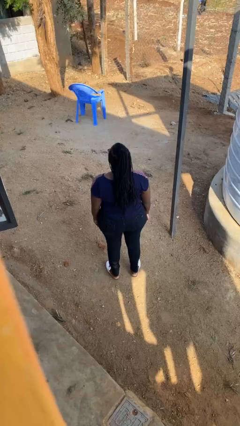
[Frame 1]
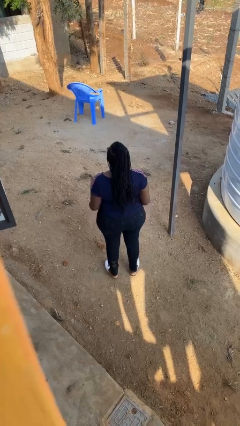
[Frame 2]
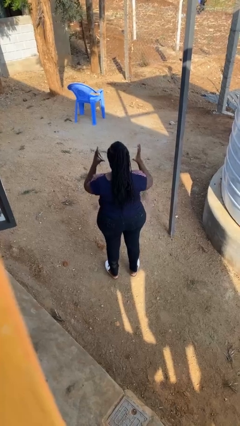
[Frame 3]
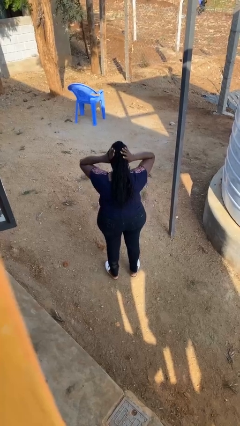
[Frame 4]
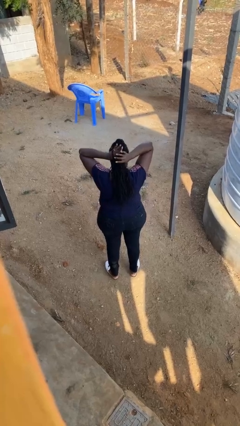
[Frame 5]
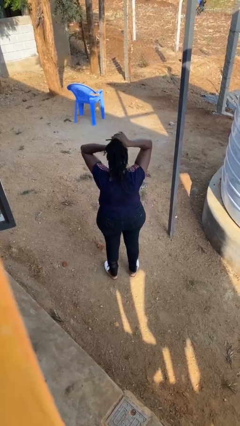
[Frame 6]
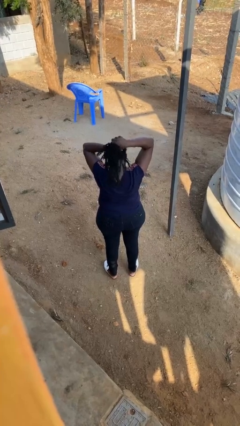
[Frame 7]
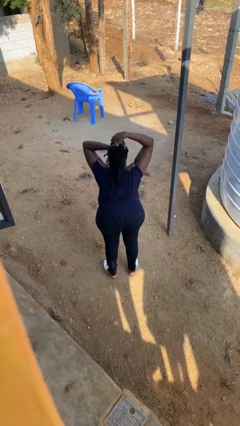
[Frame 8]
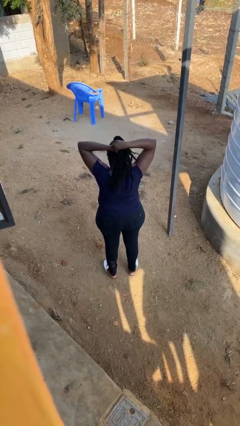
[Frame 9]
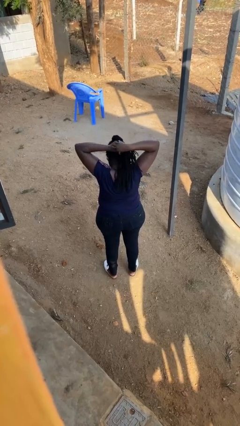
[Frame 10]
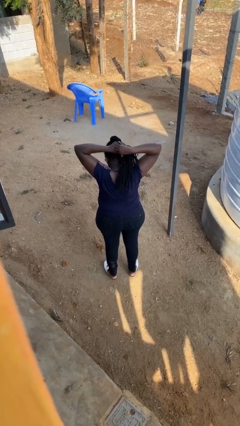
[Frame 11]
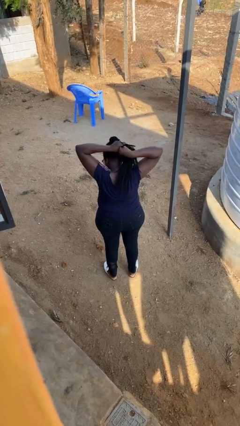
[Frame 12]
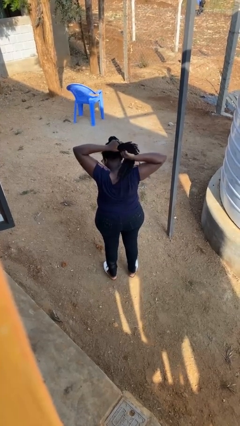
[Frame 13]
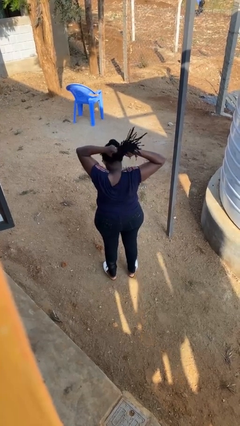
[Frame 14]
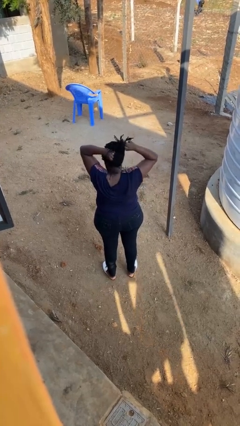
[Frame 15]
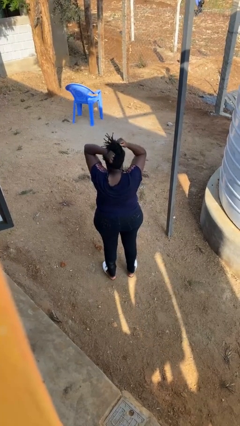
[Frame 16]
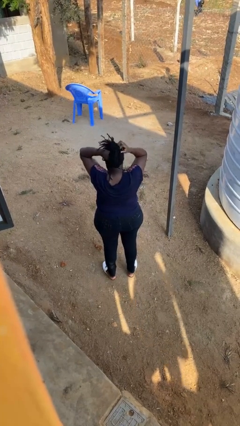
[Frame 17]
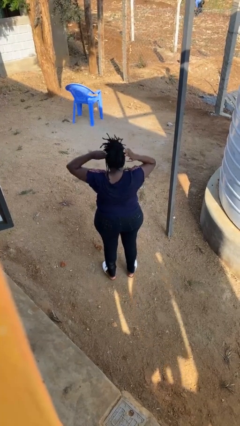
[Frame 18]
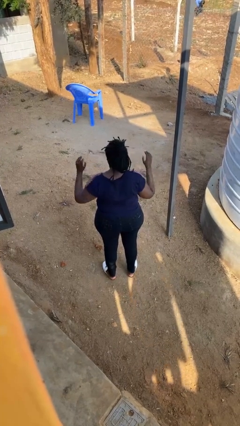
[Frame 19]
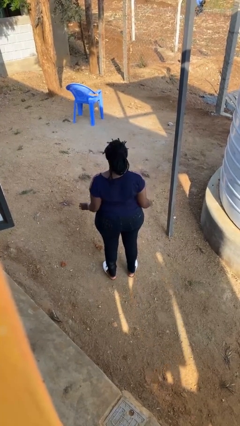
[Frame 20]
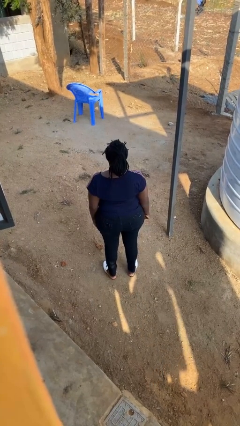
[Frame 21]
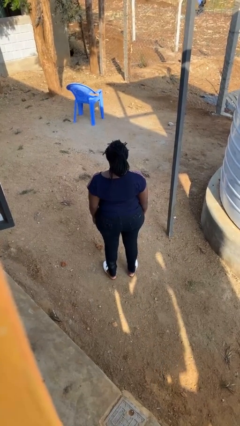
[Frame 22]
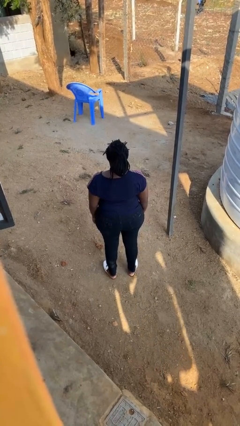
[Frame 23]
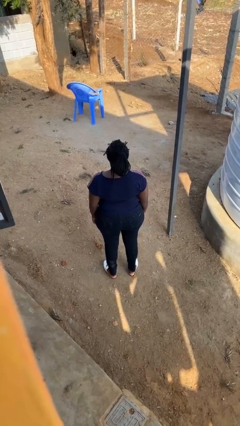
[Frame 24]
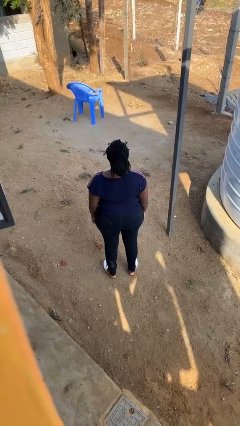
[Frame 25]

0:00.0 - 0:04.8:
person puts hair in ponytail

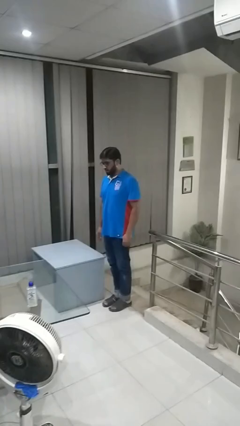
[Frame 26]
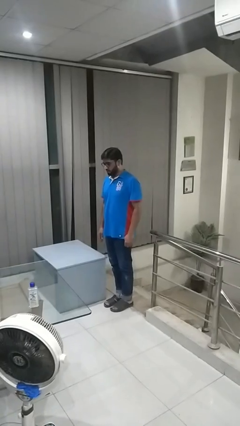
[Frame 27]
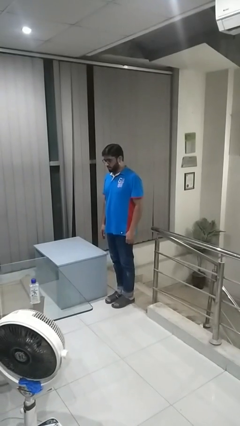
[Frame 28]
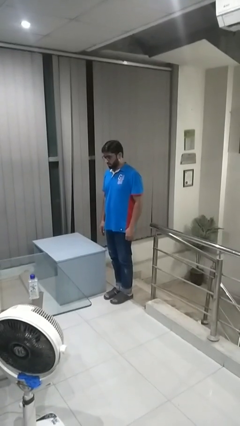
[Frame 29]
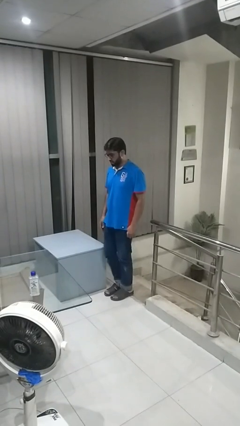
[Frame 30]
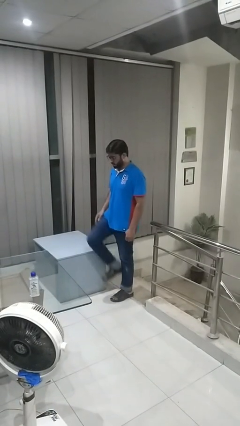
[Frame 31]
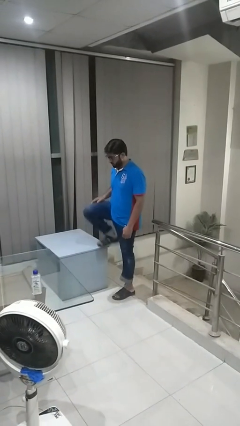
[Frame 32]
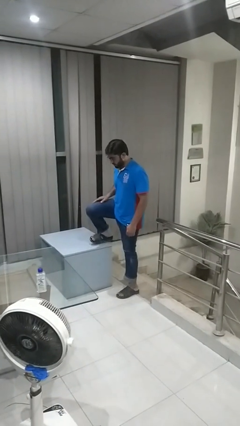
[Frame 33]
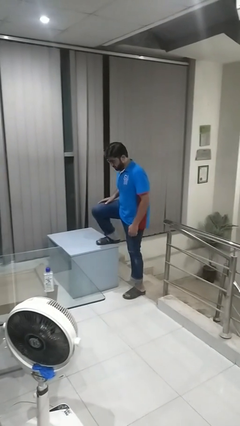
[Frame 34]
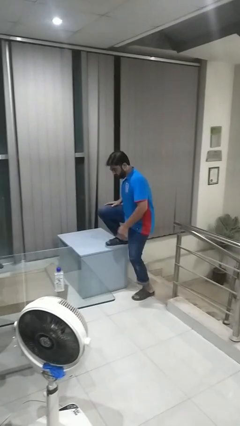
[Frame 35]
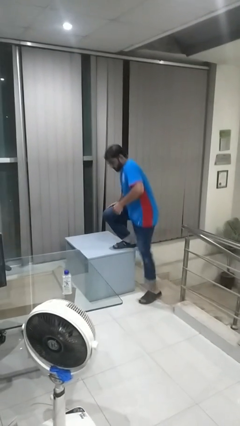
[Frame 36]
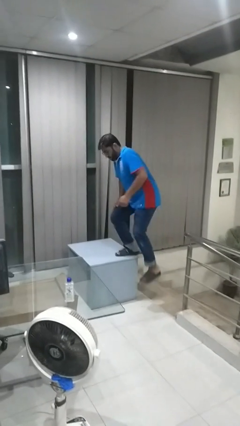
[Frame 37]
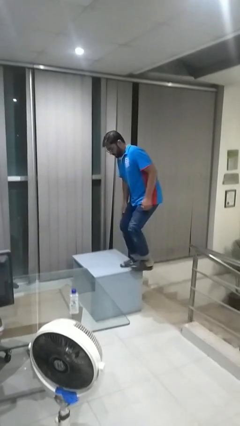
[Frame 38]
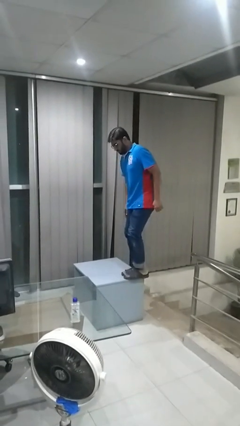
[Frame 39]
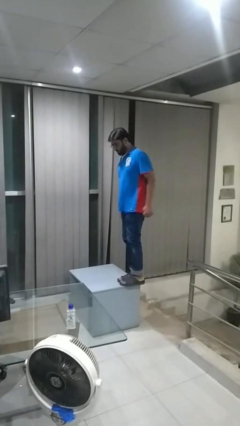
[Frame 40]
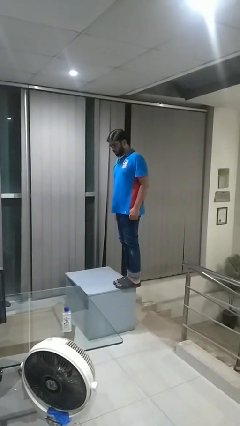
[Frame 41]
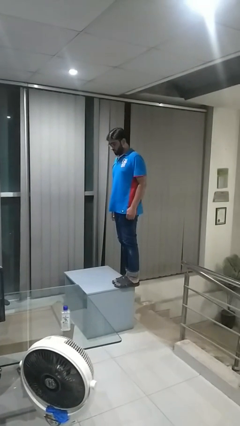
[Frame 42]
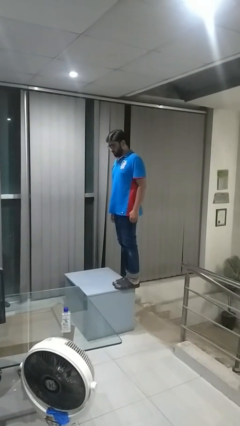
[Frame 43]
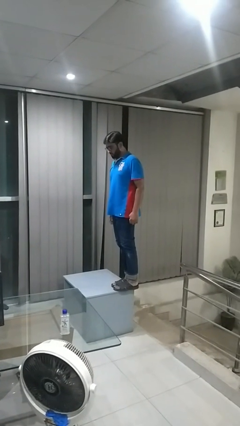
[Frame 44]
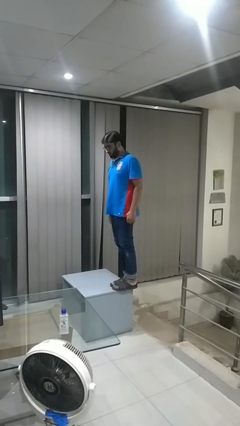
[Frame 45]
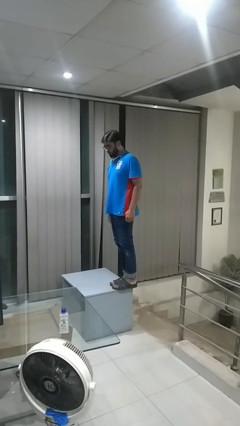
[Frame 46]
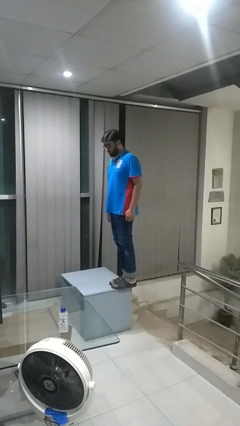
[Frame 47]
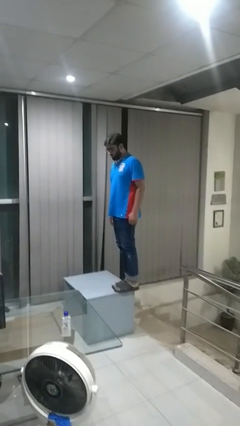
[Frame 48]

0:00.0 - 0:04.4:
person climbs on table

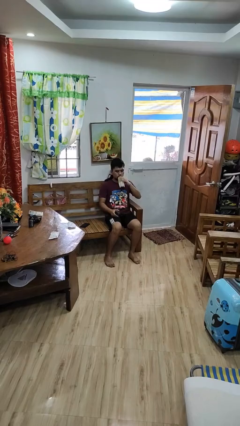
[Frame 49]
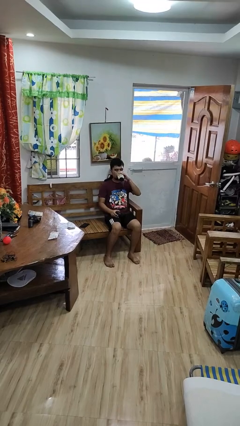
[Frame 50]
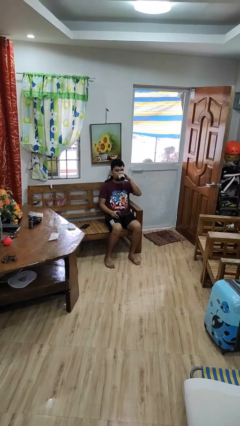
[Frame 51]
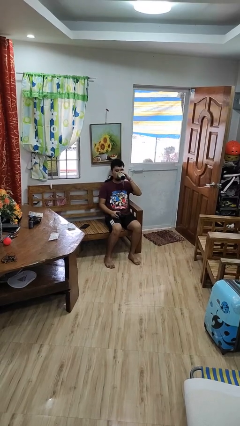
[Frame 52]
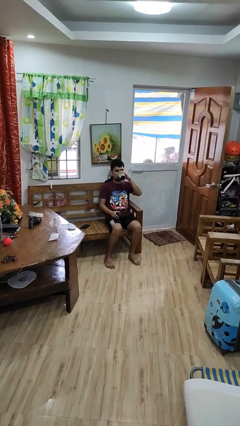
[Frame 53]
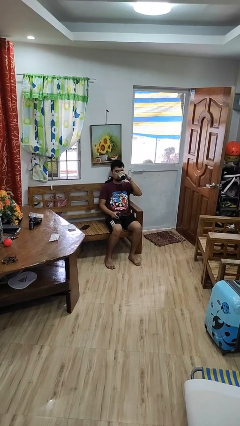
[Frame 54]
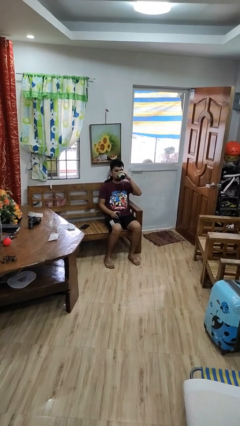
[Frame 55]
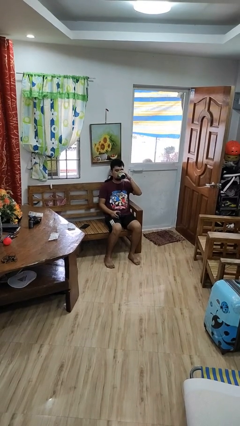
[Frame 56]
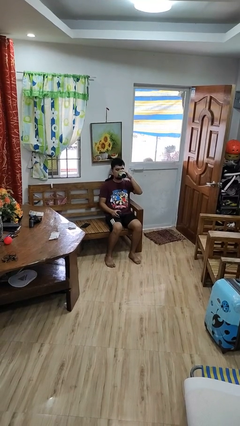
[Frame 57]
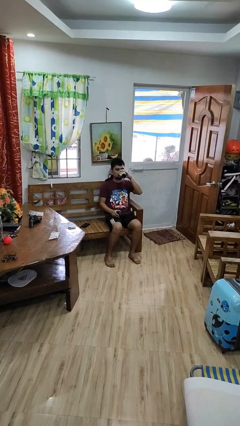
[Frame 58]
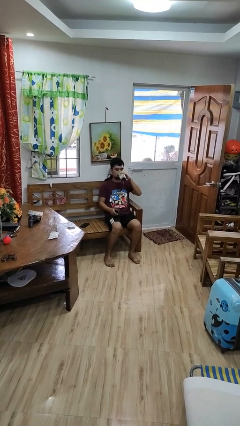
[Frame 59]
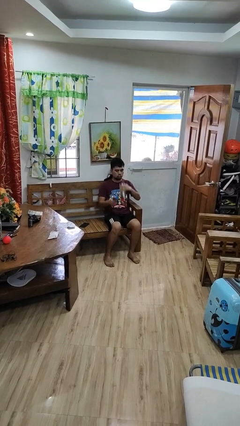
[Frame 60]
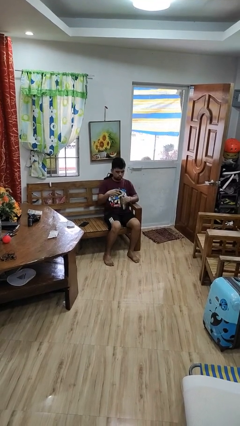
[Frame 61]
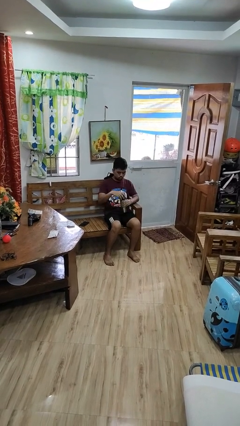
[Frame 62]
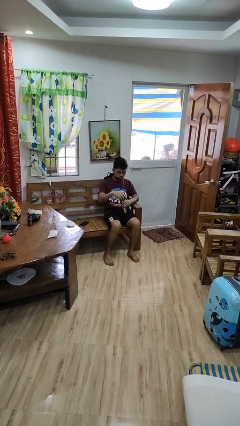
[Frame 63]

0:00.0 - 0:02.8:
person drinks from bottle

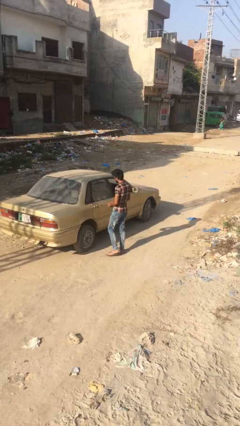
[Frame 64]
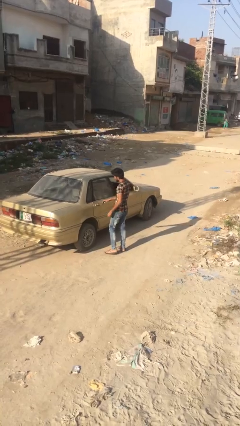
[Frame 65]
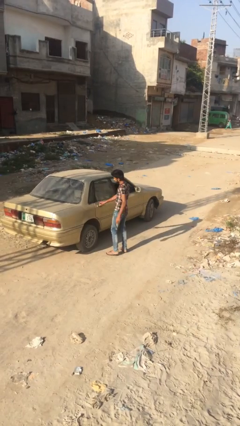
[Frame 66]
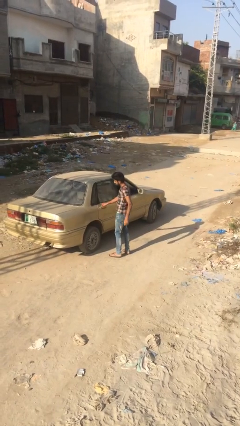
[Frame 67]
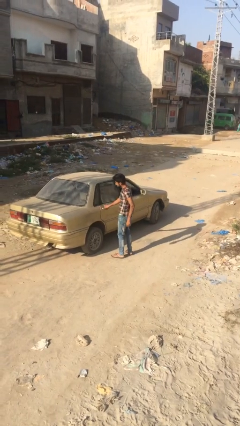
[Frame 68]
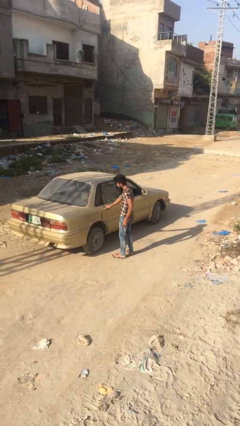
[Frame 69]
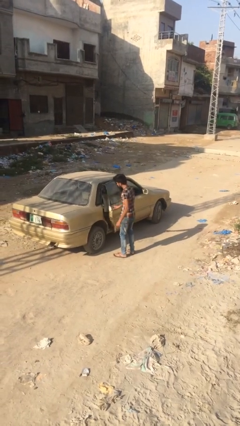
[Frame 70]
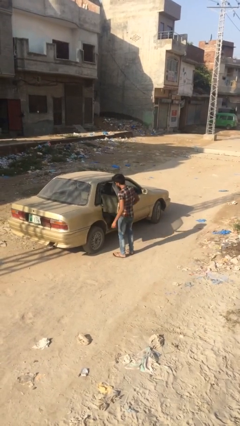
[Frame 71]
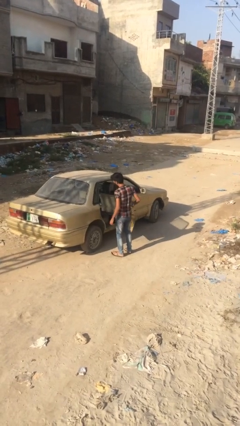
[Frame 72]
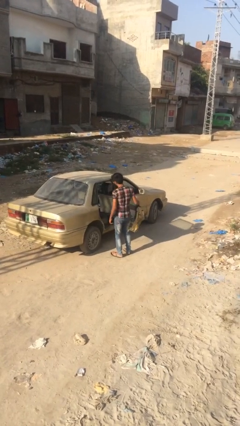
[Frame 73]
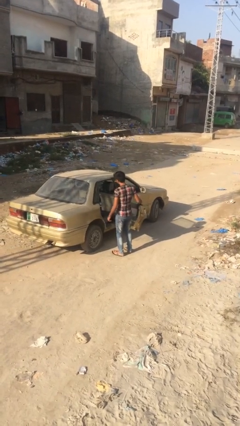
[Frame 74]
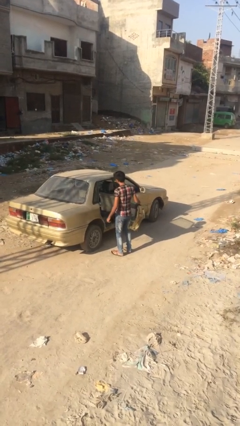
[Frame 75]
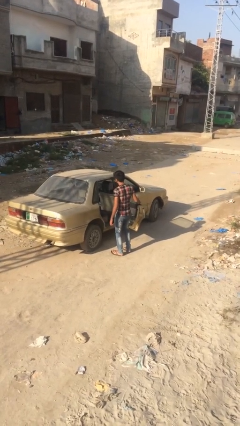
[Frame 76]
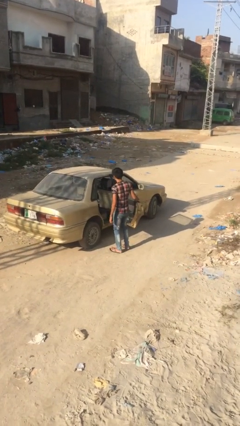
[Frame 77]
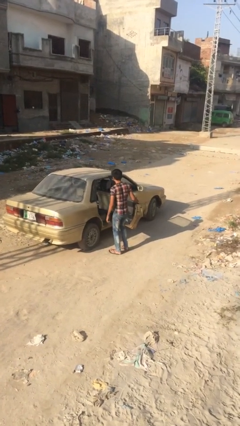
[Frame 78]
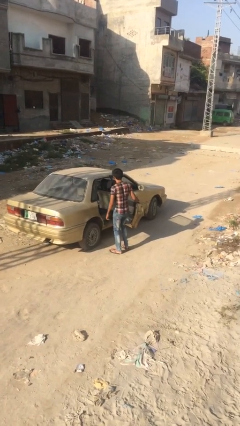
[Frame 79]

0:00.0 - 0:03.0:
person opens car door

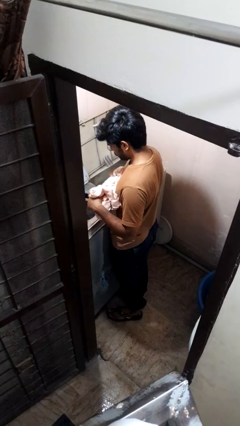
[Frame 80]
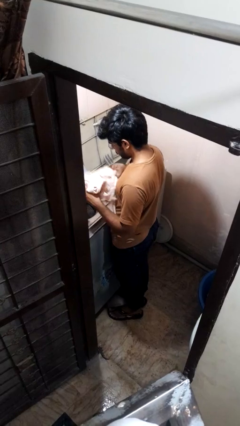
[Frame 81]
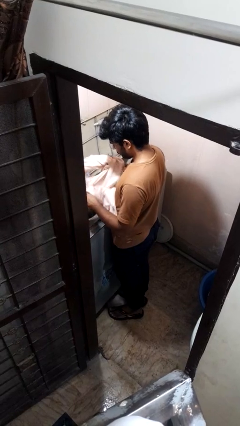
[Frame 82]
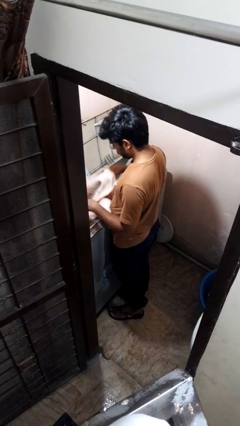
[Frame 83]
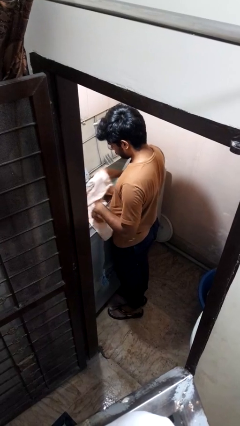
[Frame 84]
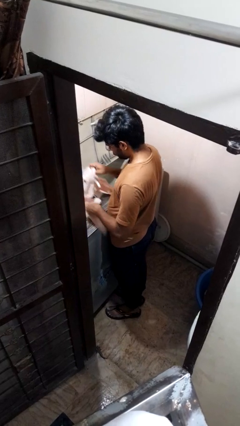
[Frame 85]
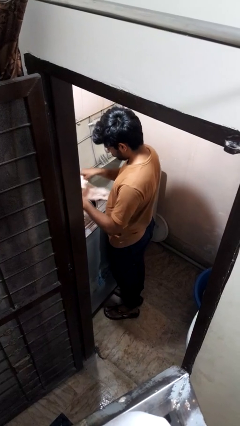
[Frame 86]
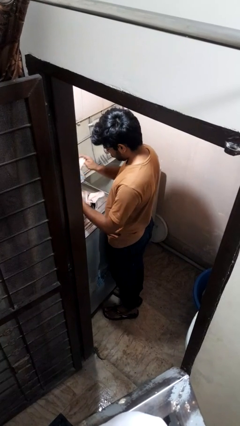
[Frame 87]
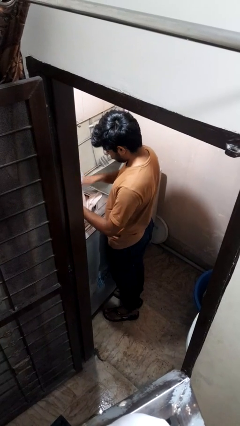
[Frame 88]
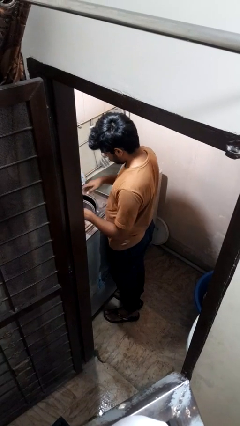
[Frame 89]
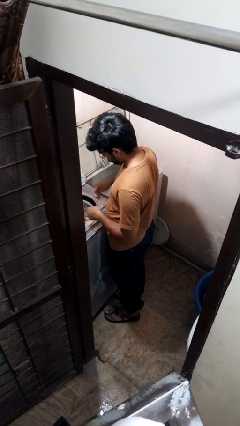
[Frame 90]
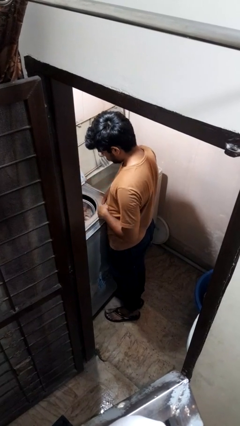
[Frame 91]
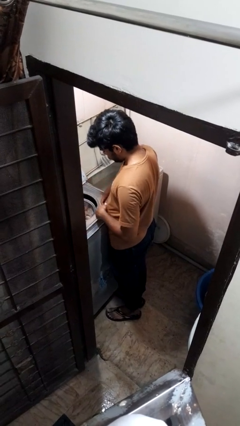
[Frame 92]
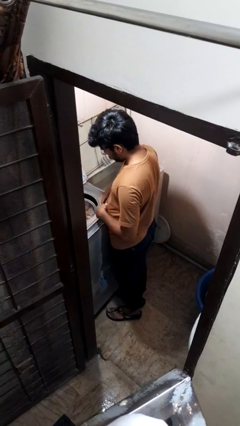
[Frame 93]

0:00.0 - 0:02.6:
person loads dryer

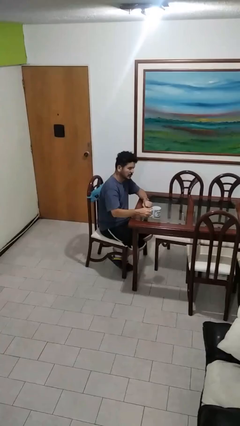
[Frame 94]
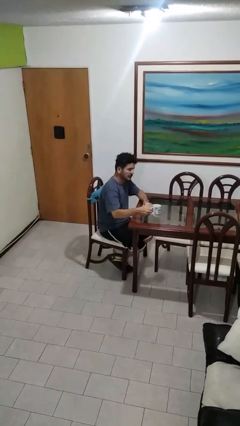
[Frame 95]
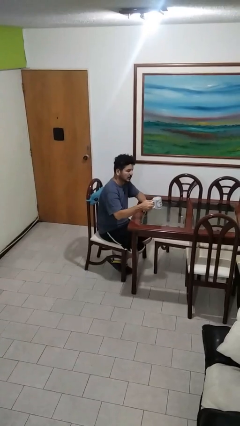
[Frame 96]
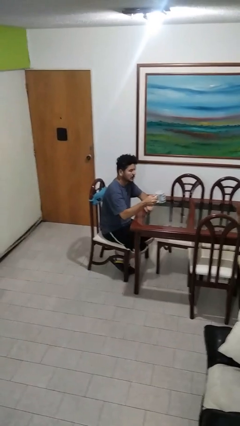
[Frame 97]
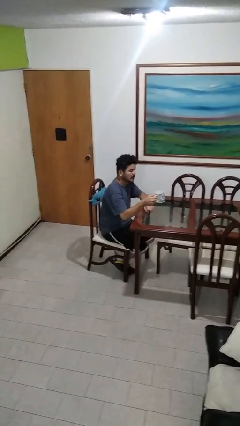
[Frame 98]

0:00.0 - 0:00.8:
person picks up object from table
